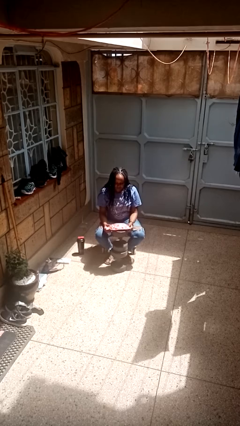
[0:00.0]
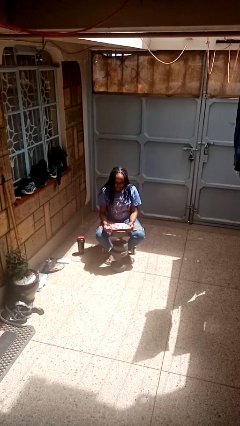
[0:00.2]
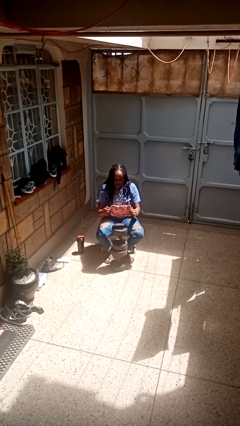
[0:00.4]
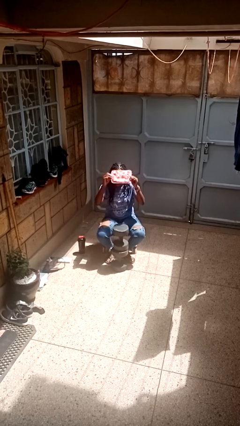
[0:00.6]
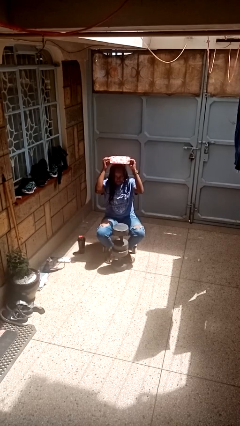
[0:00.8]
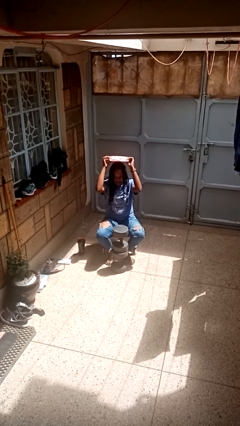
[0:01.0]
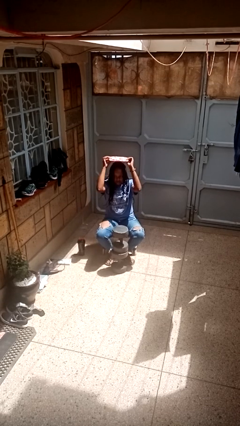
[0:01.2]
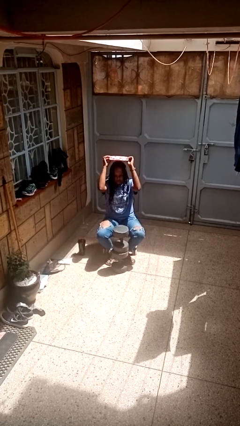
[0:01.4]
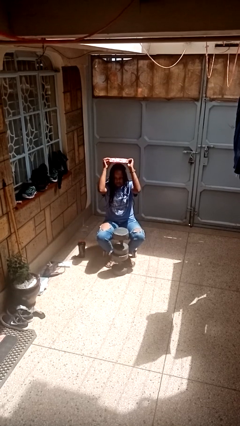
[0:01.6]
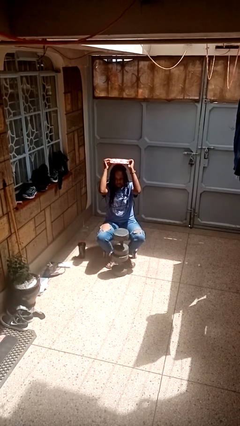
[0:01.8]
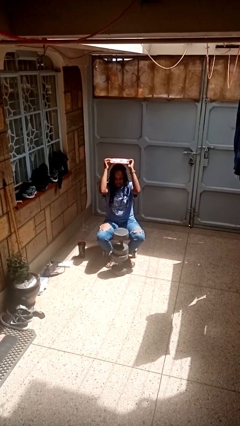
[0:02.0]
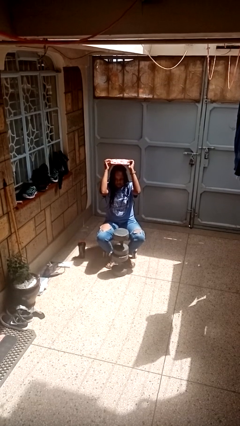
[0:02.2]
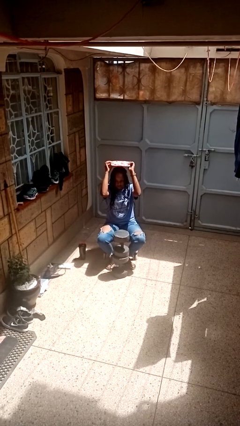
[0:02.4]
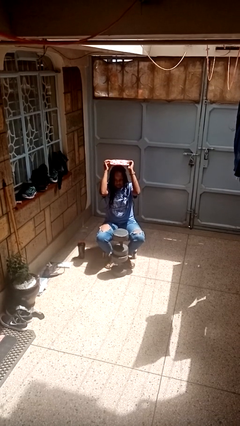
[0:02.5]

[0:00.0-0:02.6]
person holds object above head

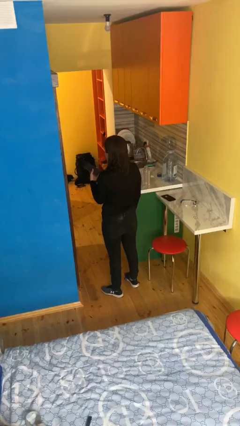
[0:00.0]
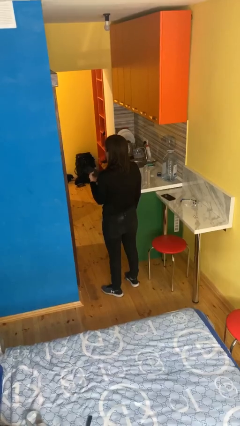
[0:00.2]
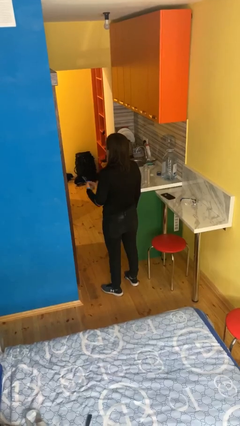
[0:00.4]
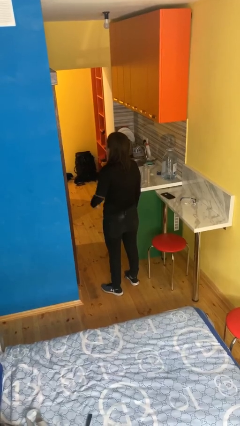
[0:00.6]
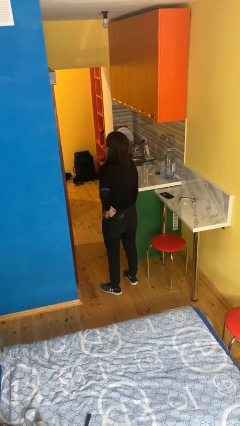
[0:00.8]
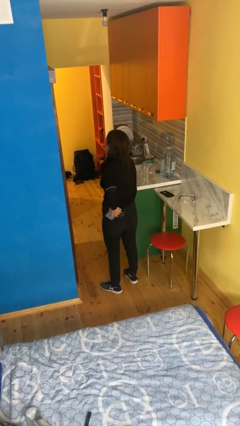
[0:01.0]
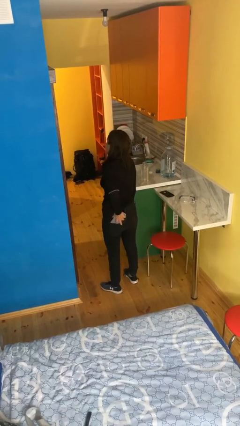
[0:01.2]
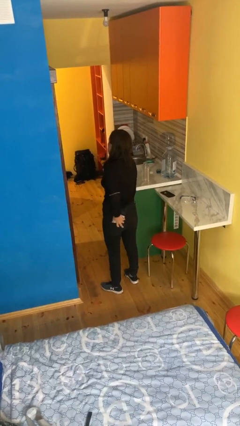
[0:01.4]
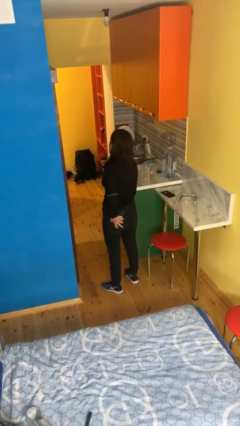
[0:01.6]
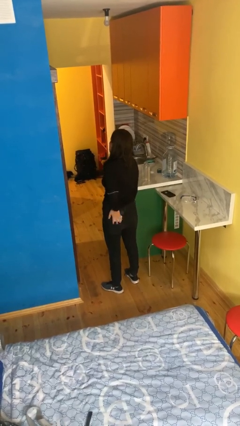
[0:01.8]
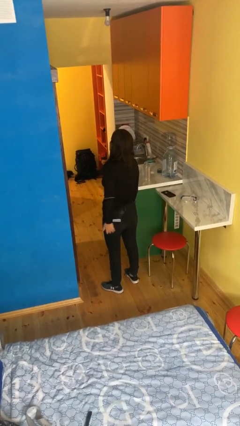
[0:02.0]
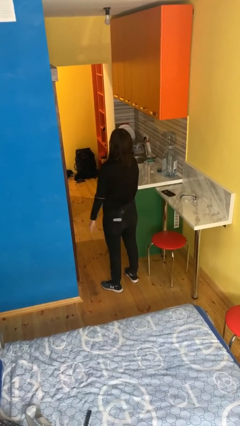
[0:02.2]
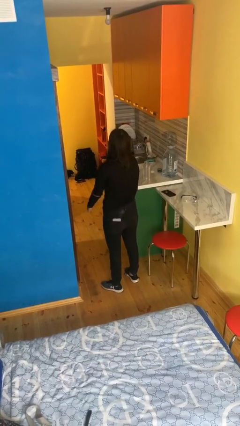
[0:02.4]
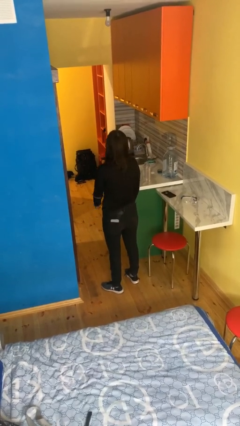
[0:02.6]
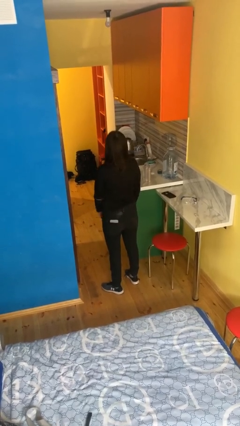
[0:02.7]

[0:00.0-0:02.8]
person puts phone into pocket

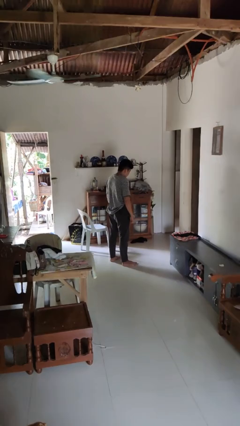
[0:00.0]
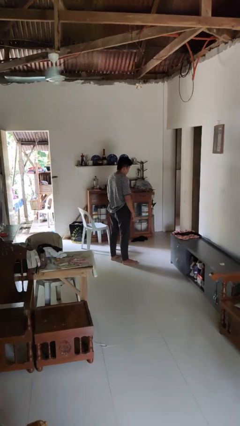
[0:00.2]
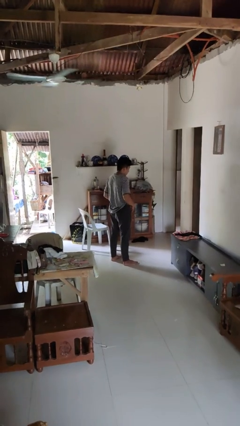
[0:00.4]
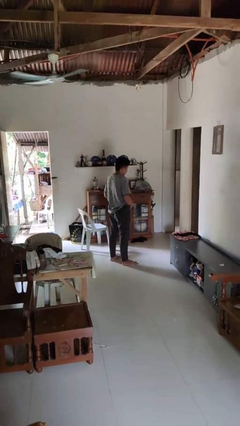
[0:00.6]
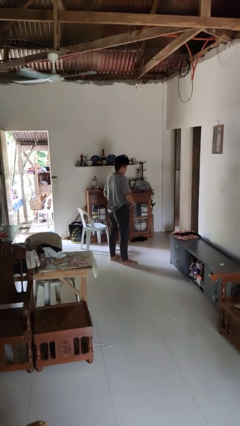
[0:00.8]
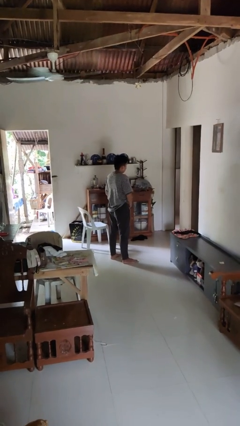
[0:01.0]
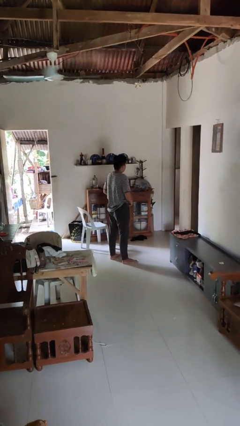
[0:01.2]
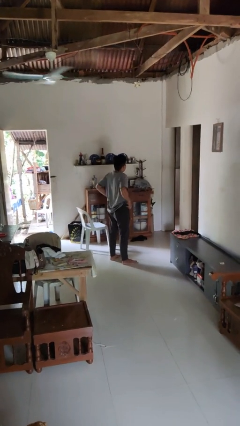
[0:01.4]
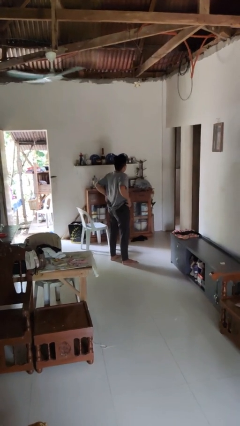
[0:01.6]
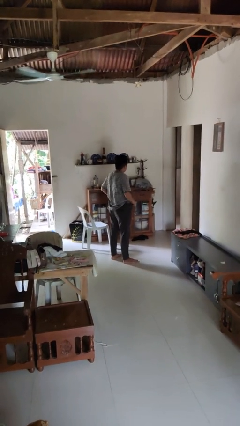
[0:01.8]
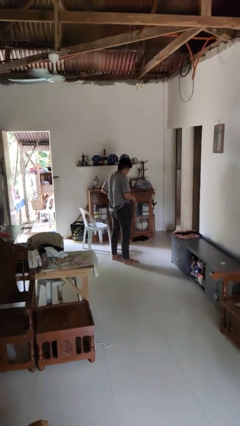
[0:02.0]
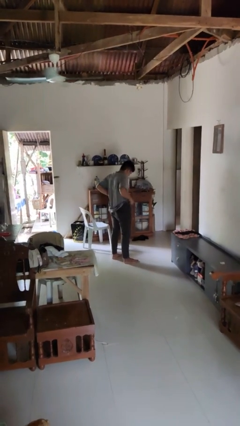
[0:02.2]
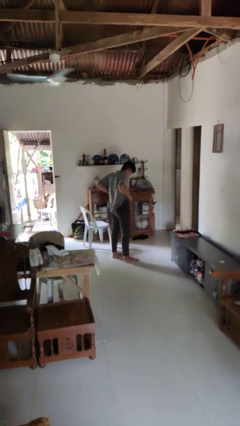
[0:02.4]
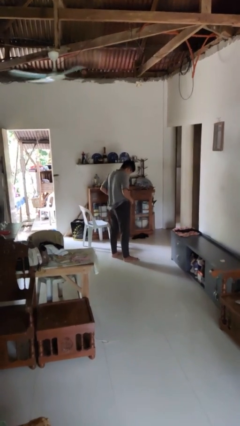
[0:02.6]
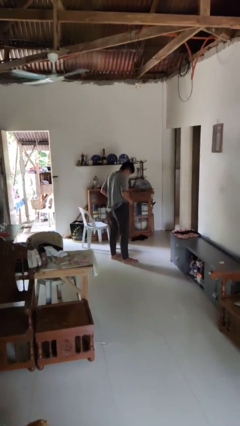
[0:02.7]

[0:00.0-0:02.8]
person hikes up pants

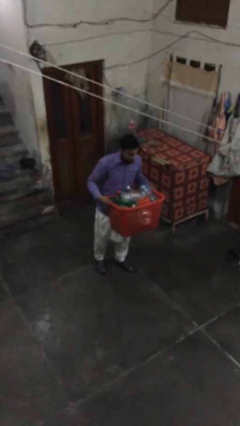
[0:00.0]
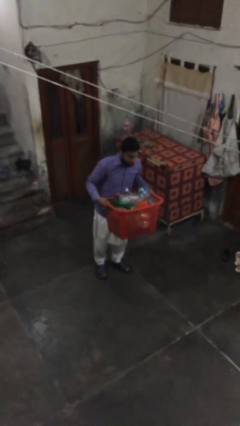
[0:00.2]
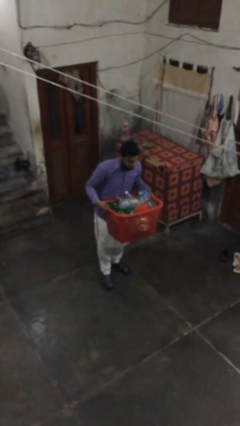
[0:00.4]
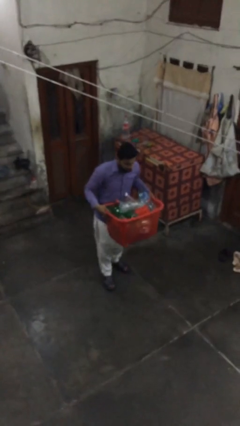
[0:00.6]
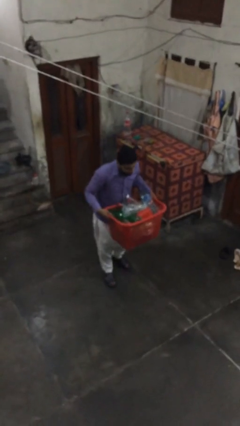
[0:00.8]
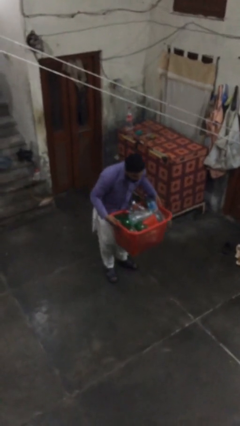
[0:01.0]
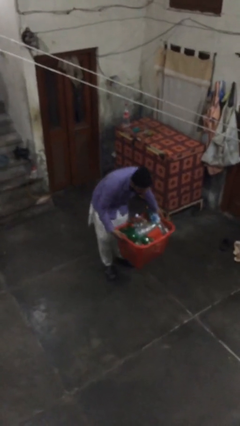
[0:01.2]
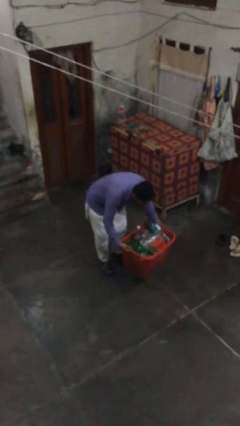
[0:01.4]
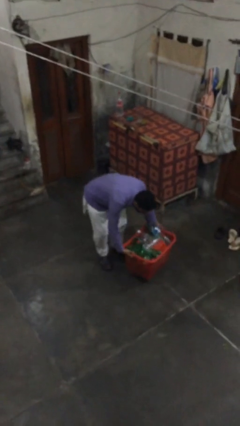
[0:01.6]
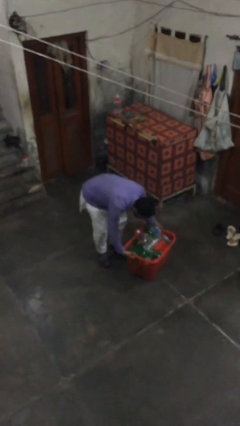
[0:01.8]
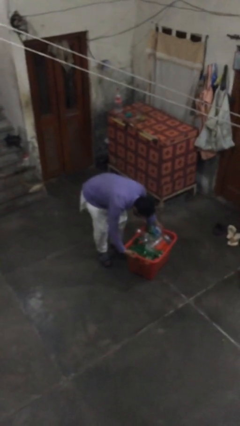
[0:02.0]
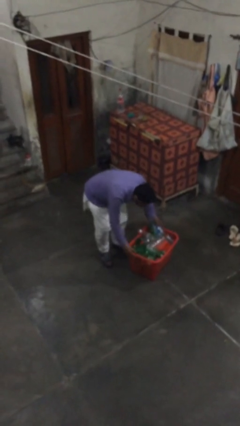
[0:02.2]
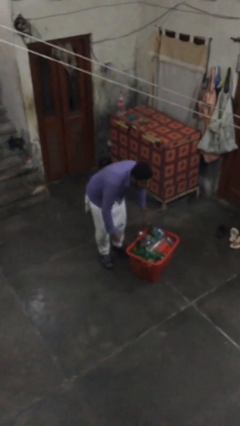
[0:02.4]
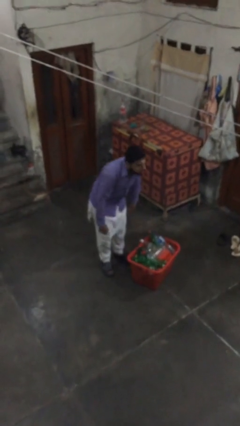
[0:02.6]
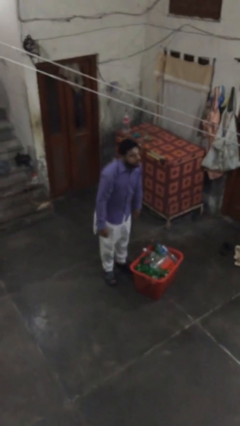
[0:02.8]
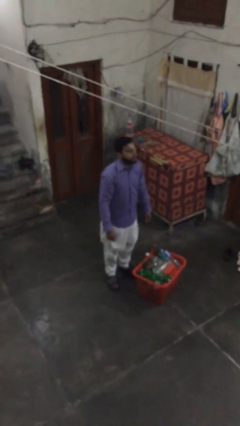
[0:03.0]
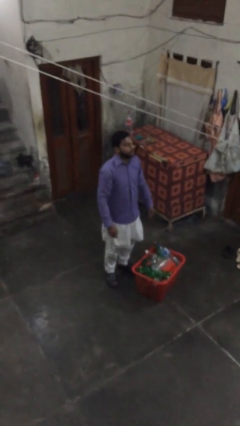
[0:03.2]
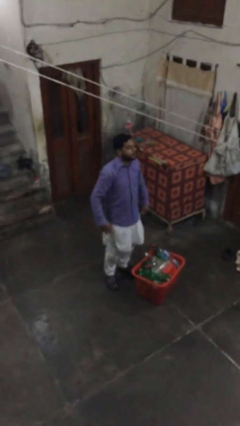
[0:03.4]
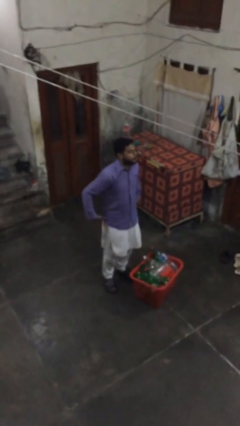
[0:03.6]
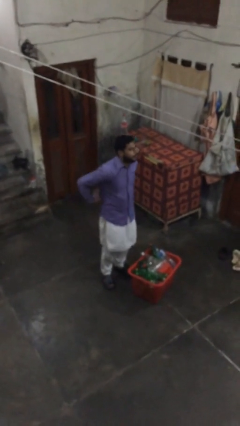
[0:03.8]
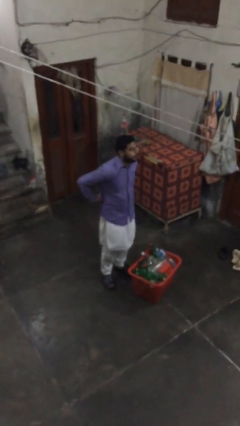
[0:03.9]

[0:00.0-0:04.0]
person puts down object on floor

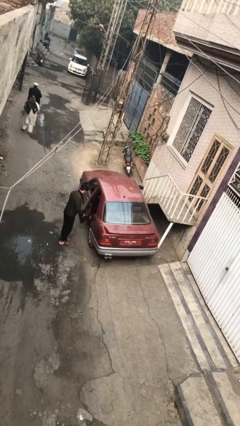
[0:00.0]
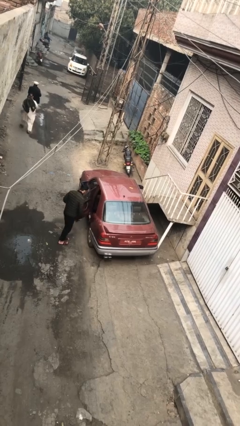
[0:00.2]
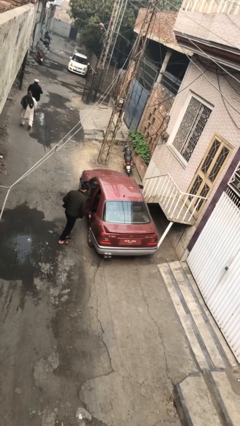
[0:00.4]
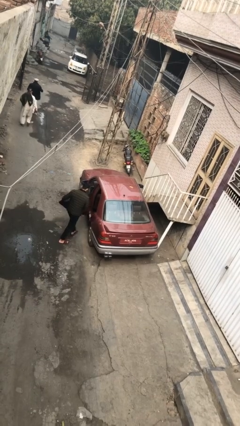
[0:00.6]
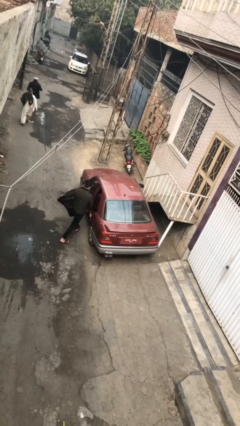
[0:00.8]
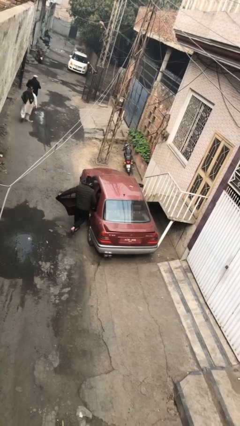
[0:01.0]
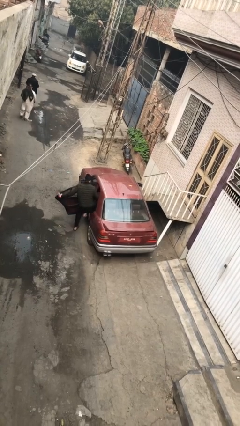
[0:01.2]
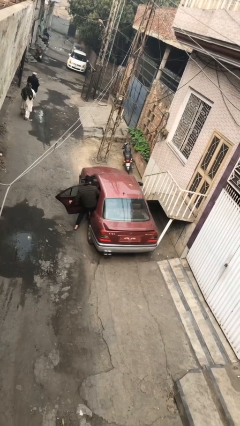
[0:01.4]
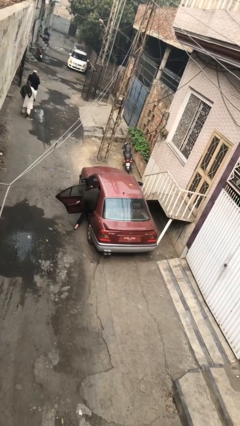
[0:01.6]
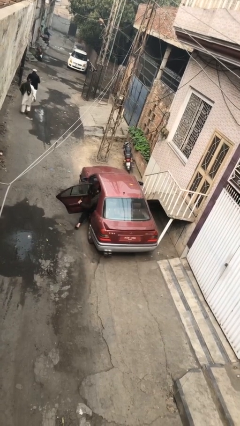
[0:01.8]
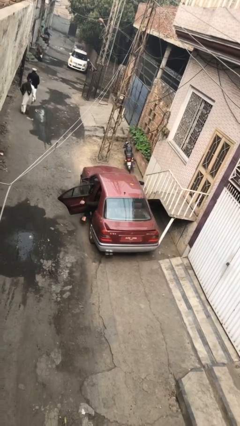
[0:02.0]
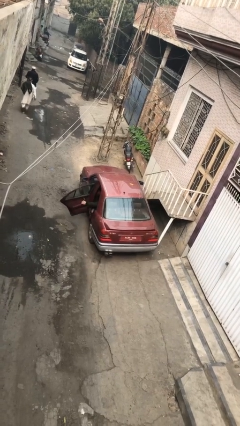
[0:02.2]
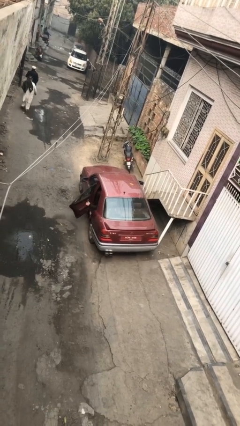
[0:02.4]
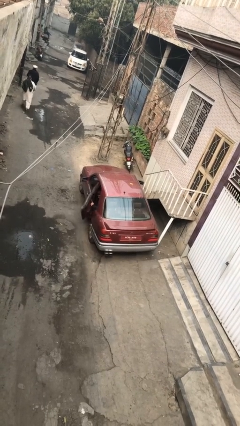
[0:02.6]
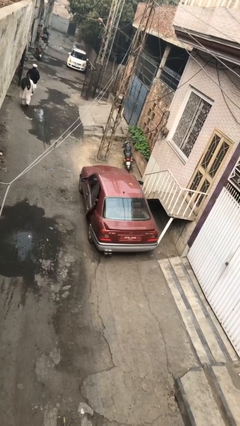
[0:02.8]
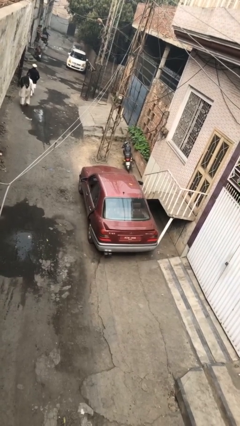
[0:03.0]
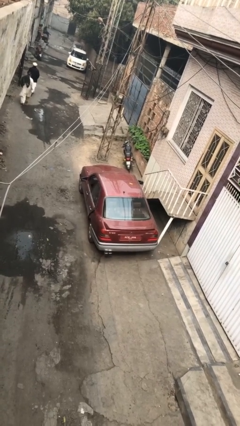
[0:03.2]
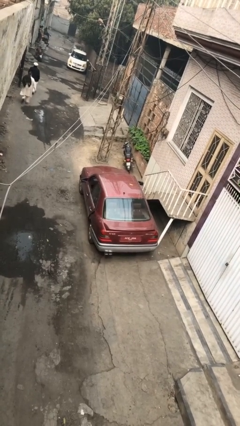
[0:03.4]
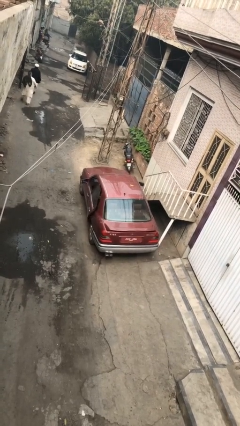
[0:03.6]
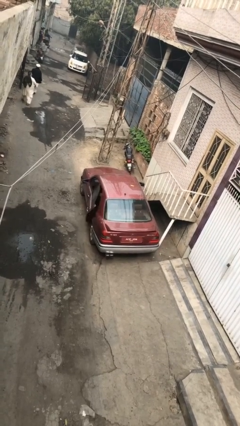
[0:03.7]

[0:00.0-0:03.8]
car picks up person

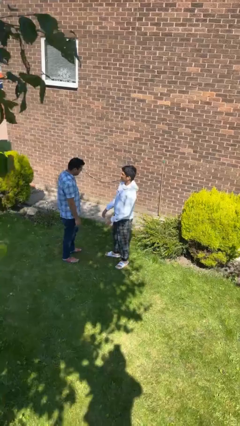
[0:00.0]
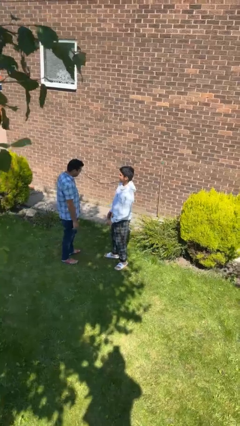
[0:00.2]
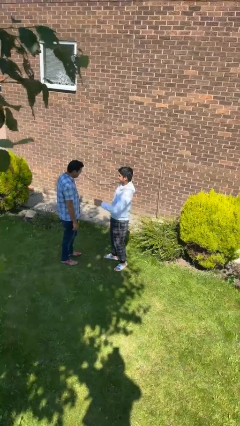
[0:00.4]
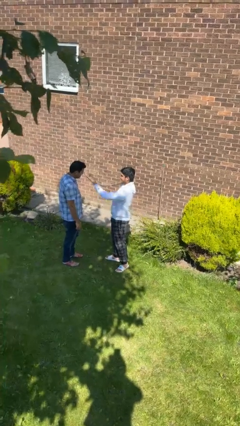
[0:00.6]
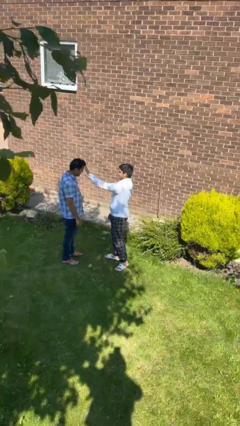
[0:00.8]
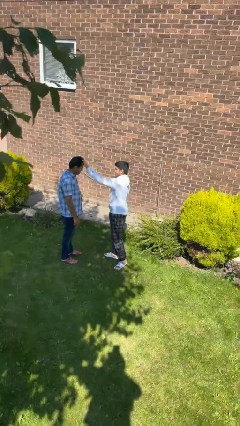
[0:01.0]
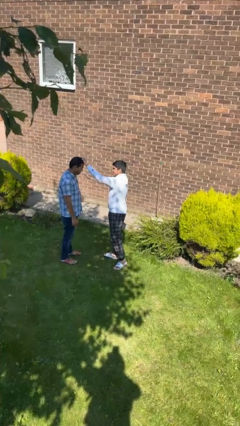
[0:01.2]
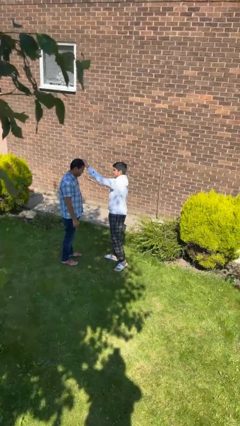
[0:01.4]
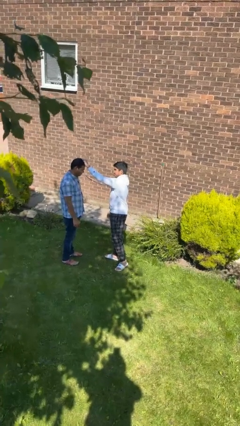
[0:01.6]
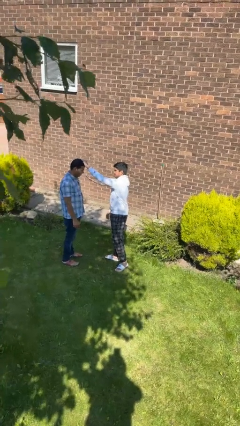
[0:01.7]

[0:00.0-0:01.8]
person grabs person by hair
